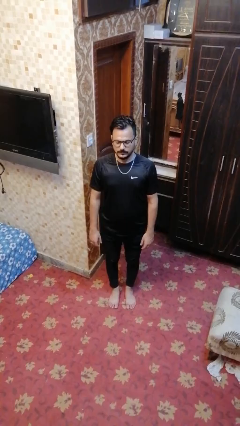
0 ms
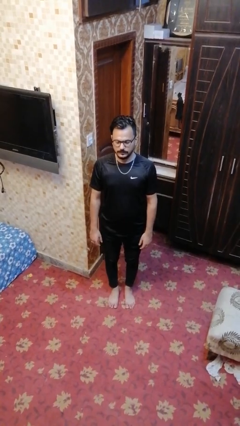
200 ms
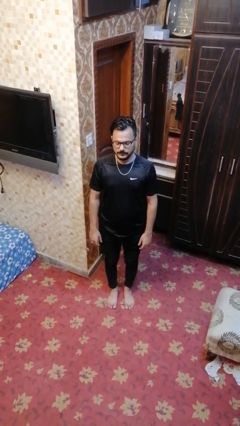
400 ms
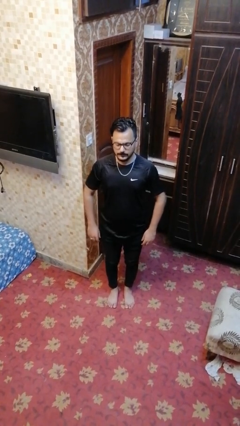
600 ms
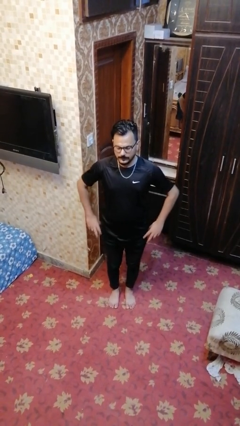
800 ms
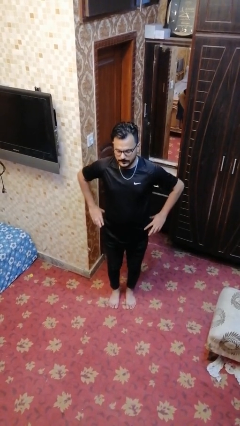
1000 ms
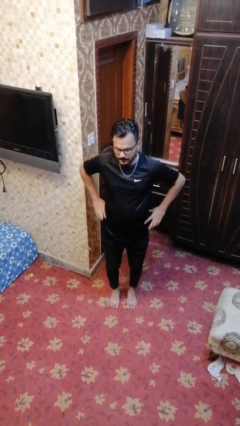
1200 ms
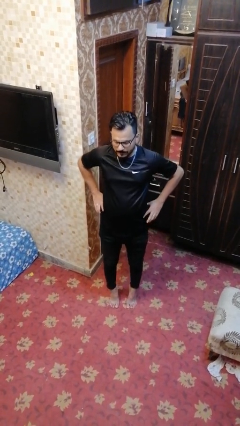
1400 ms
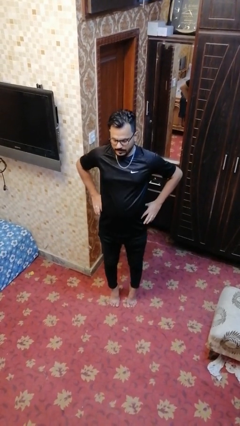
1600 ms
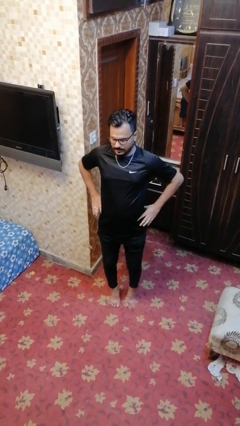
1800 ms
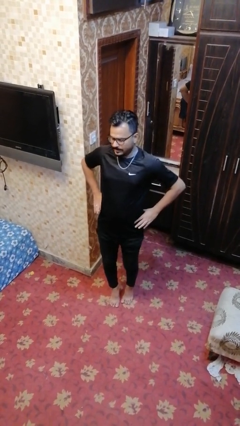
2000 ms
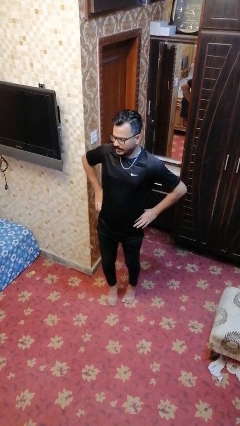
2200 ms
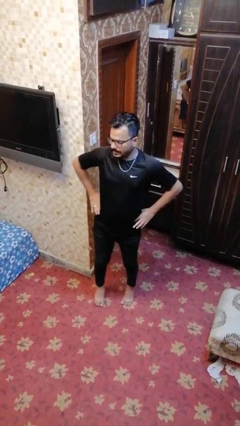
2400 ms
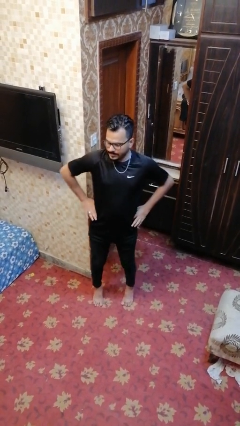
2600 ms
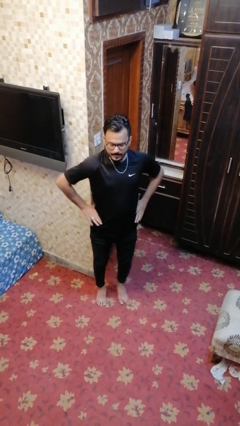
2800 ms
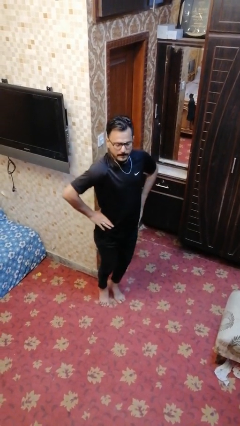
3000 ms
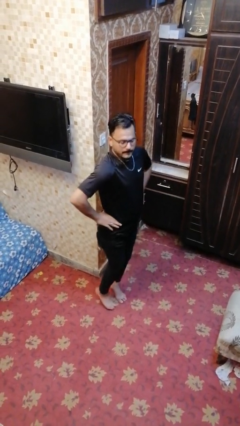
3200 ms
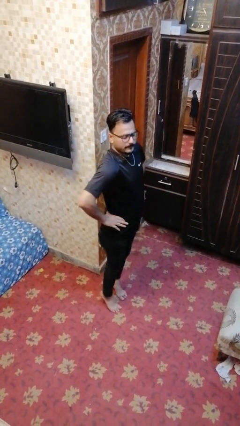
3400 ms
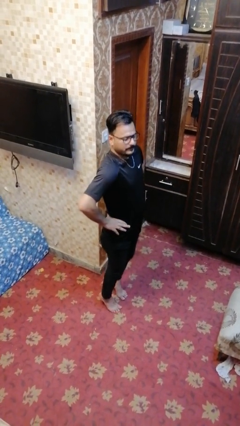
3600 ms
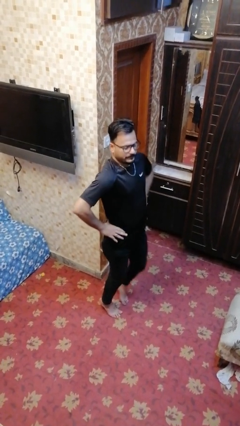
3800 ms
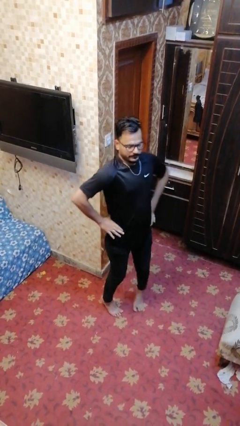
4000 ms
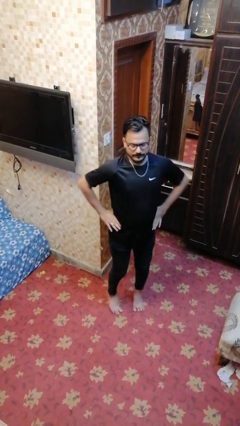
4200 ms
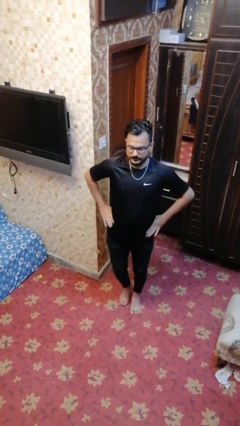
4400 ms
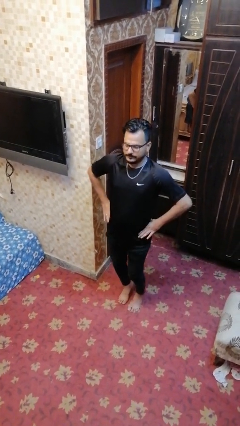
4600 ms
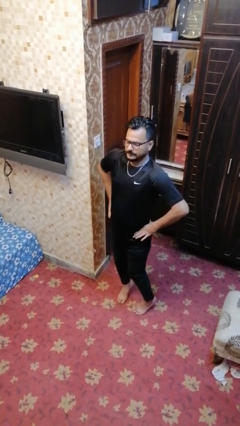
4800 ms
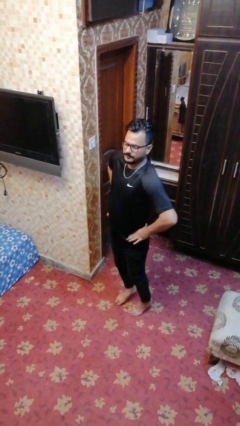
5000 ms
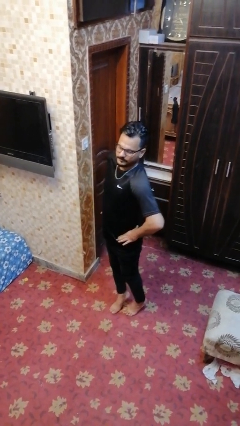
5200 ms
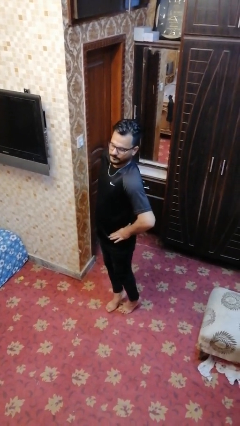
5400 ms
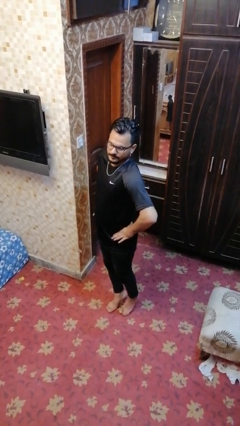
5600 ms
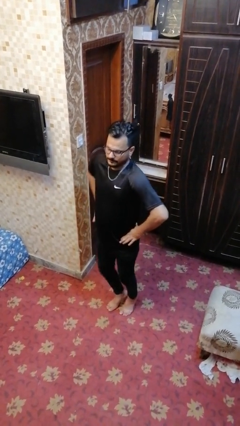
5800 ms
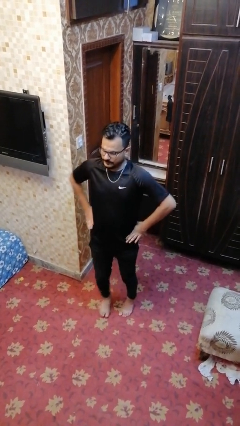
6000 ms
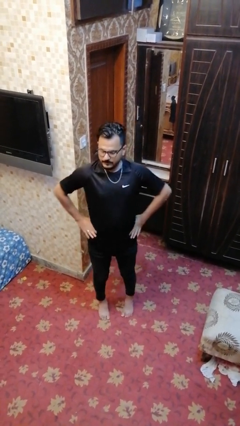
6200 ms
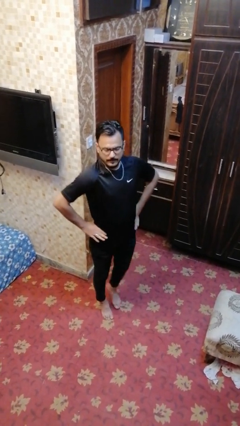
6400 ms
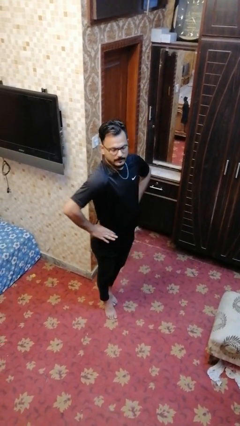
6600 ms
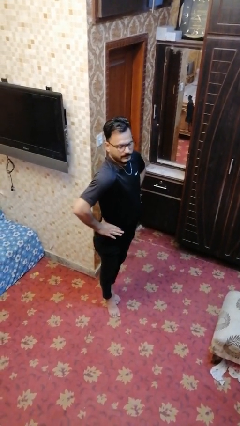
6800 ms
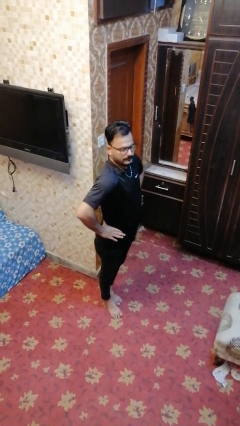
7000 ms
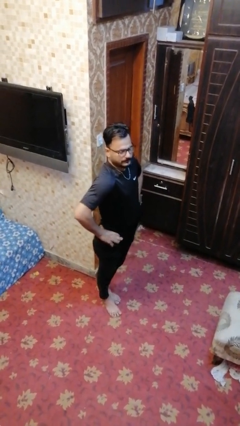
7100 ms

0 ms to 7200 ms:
person walks tiptoe

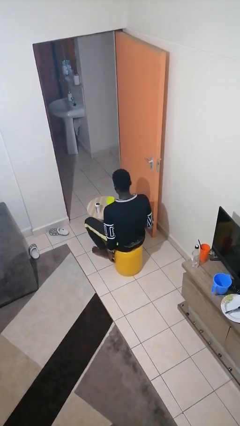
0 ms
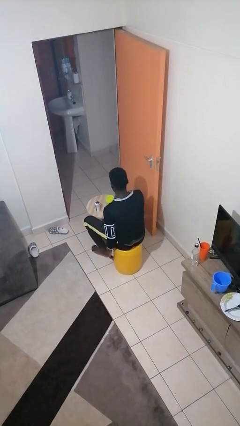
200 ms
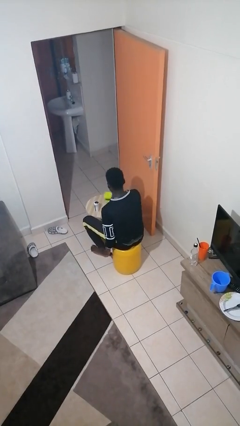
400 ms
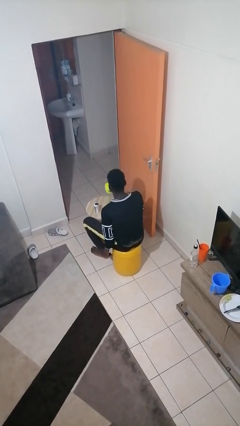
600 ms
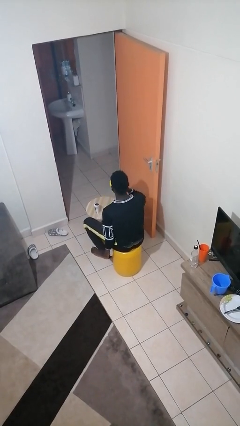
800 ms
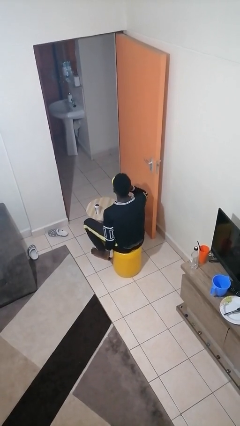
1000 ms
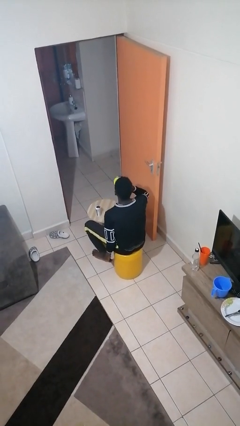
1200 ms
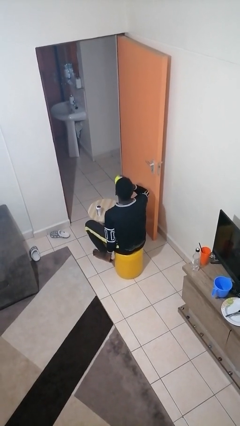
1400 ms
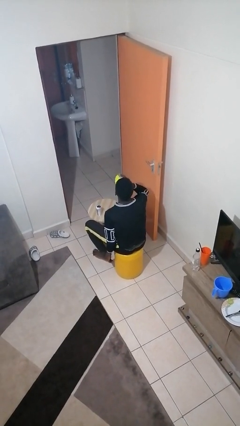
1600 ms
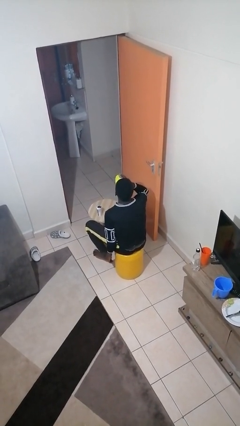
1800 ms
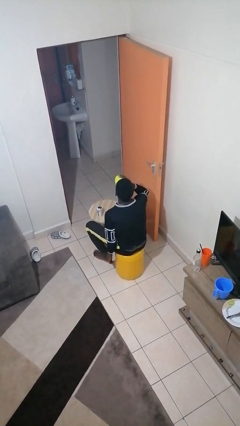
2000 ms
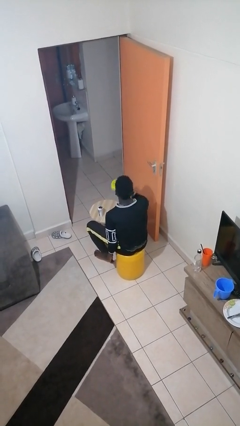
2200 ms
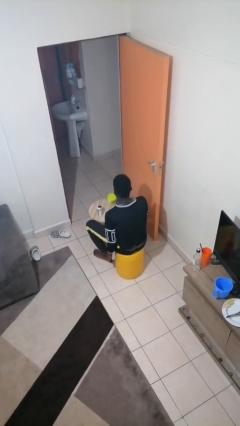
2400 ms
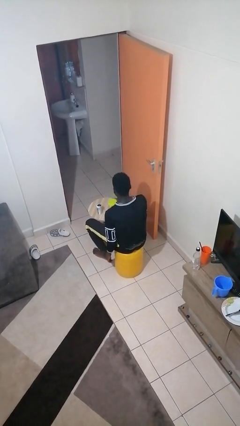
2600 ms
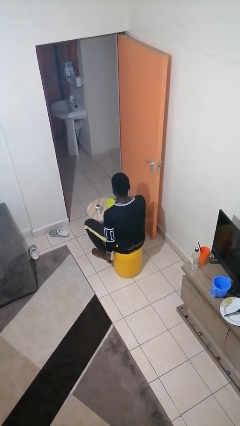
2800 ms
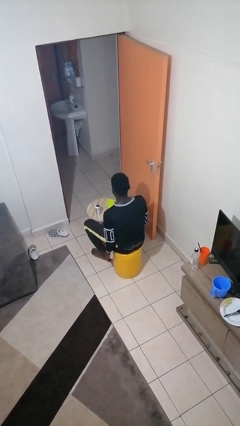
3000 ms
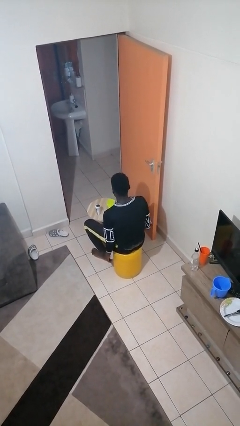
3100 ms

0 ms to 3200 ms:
person drinks from cup

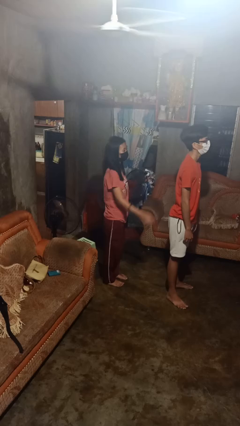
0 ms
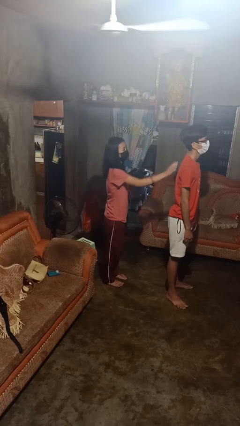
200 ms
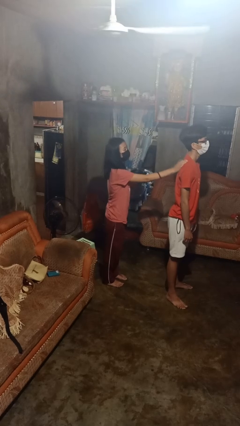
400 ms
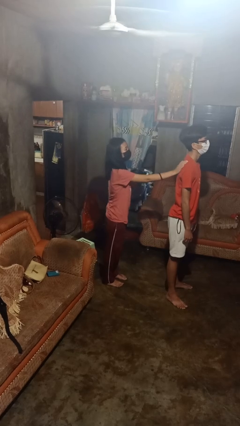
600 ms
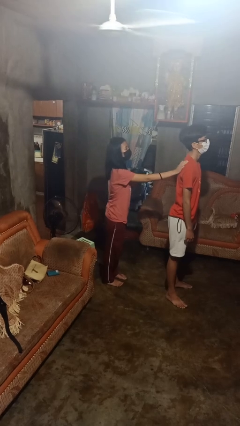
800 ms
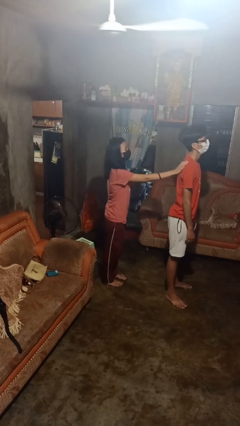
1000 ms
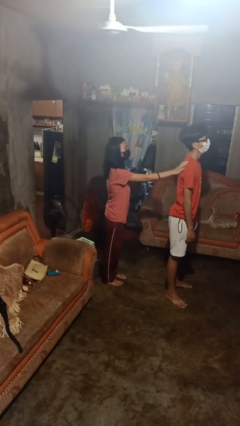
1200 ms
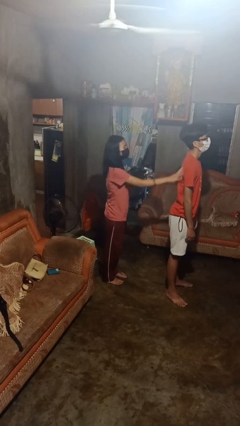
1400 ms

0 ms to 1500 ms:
person touches back of person

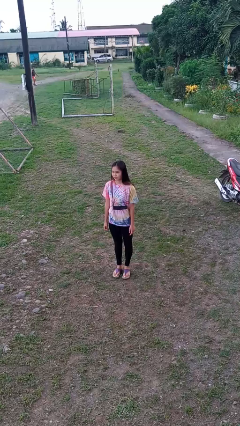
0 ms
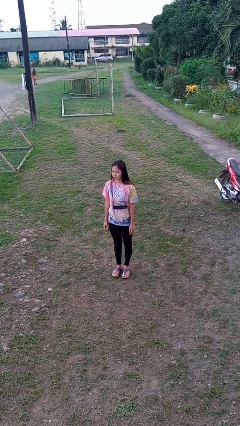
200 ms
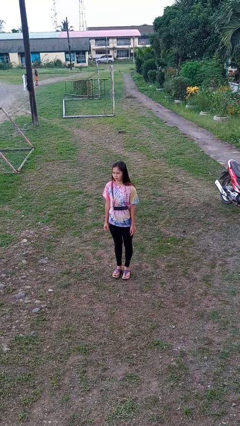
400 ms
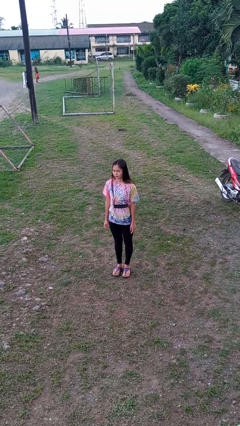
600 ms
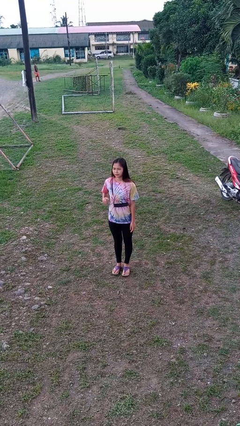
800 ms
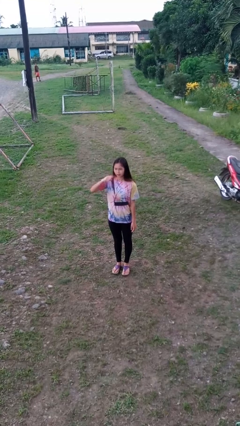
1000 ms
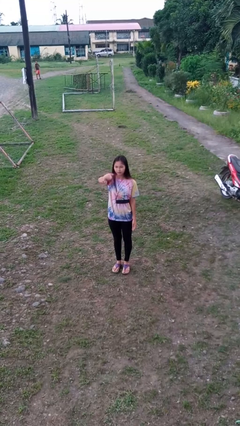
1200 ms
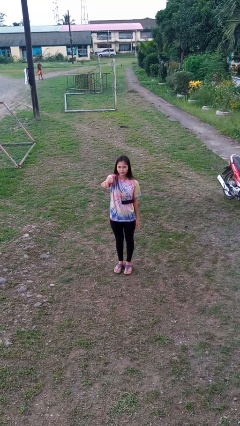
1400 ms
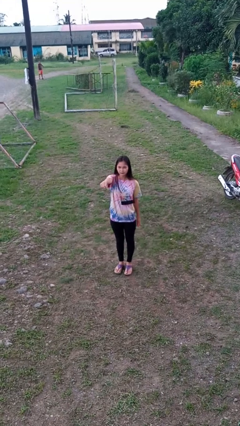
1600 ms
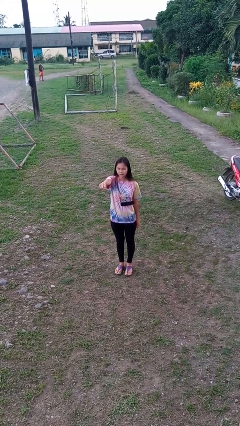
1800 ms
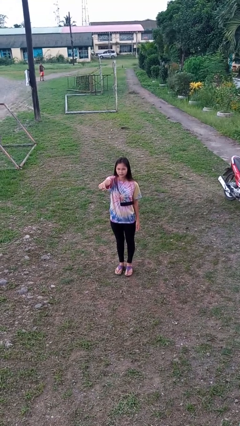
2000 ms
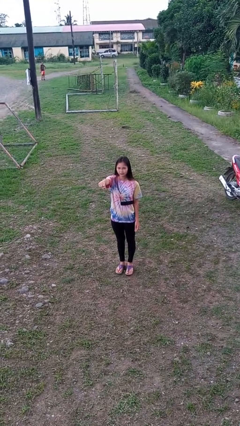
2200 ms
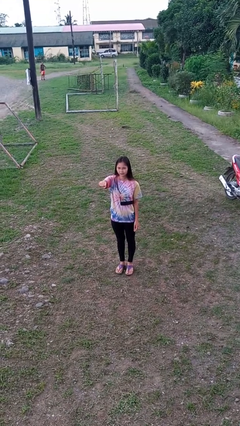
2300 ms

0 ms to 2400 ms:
person punches

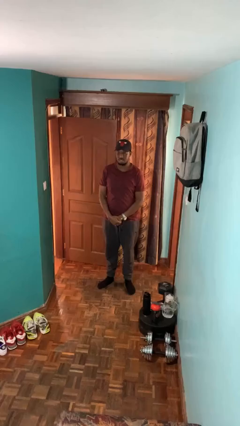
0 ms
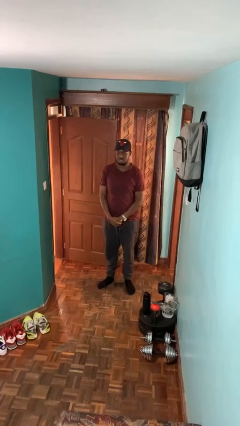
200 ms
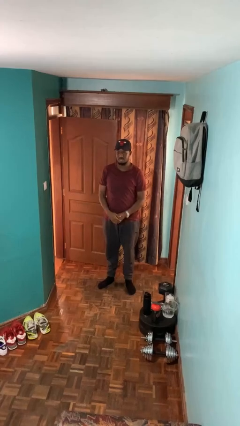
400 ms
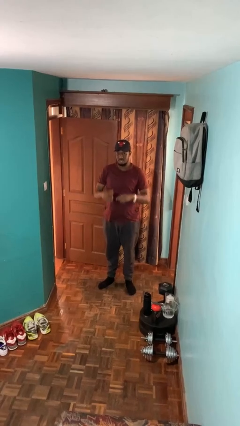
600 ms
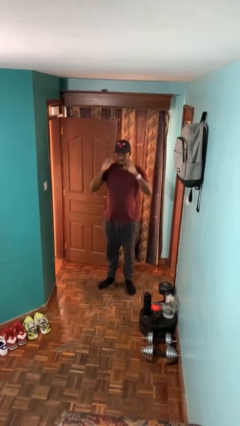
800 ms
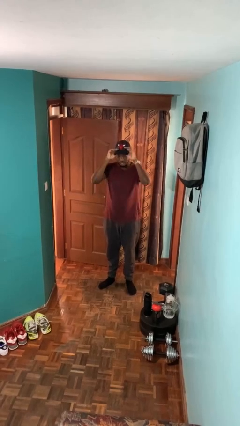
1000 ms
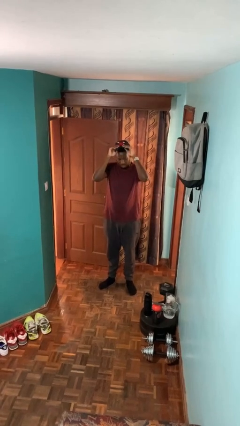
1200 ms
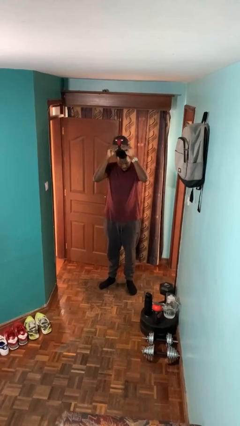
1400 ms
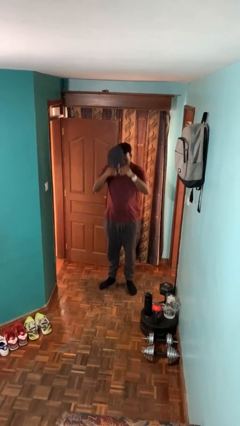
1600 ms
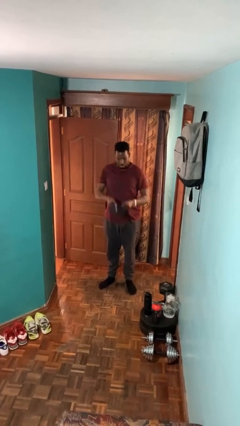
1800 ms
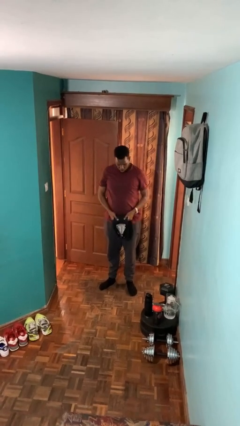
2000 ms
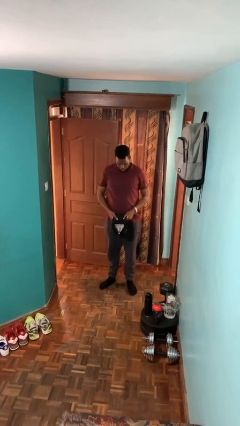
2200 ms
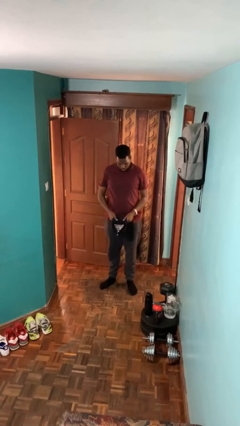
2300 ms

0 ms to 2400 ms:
person takes off hat

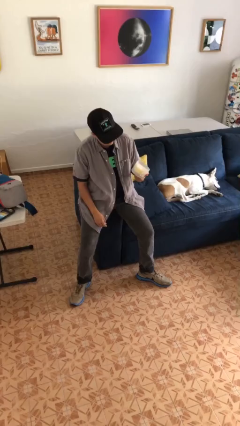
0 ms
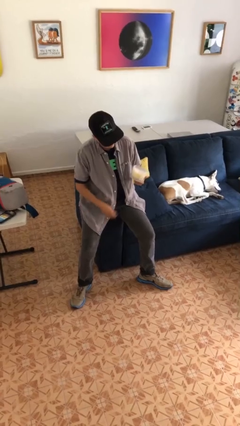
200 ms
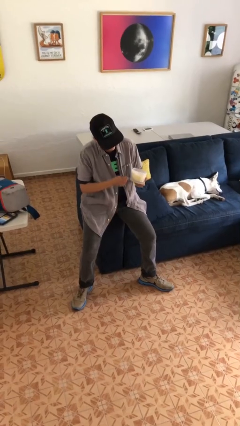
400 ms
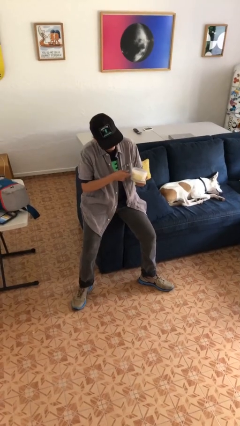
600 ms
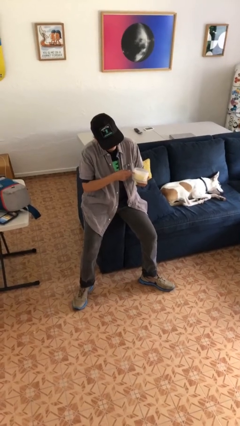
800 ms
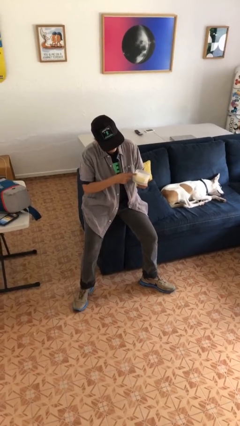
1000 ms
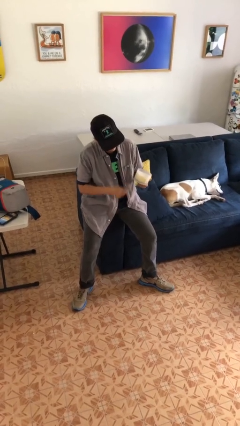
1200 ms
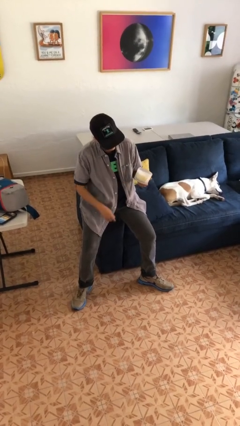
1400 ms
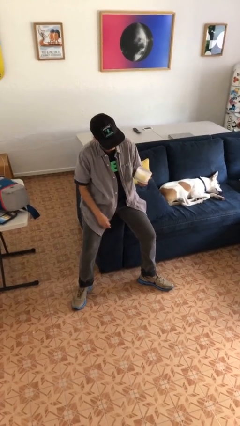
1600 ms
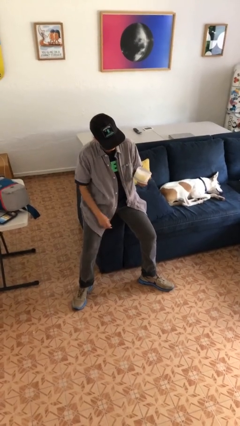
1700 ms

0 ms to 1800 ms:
person taps object with finger
